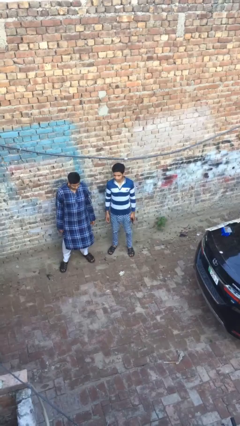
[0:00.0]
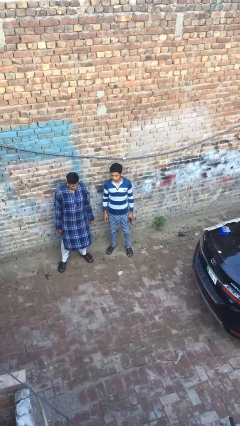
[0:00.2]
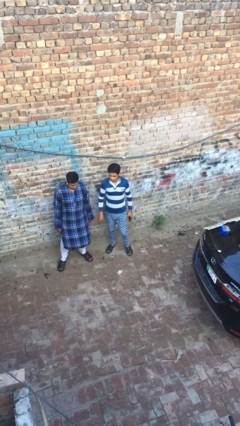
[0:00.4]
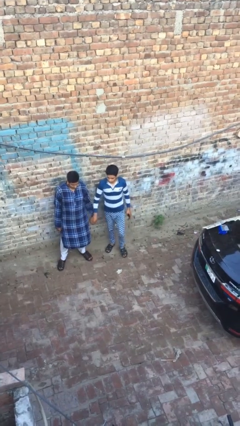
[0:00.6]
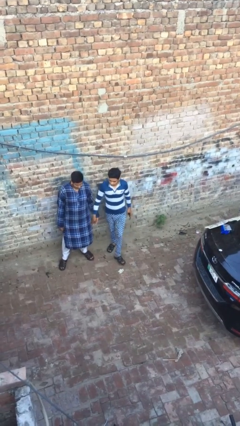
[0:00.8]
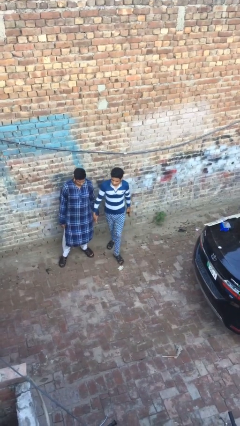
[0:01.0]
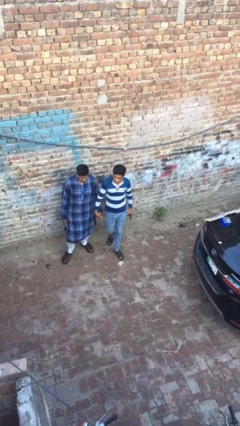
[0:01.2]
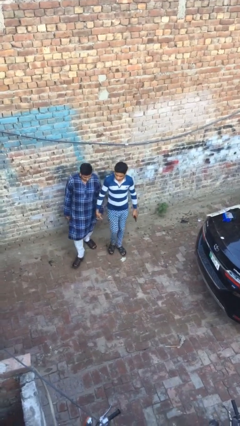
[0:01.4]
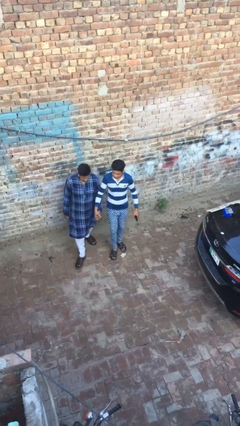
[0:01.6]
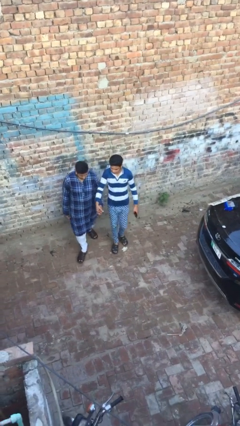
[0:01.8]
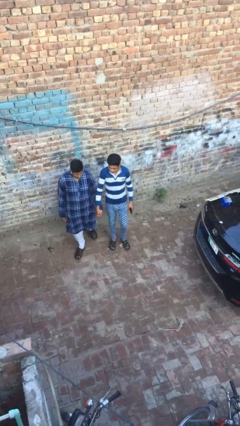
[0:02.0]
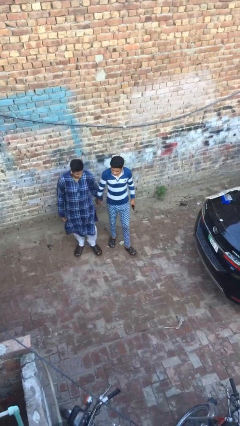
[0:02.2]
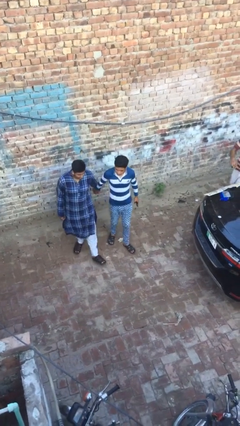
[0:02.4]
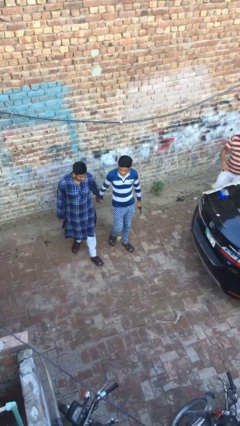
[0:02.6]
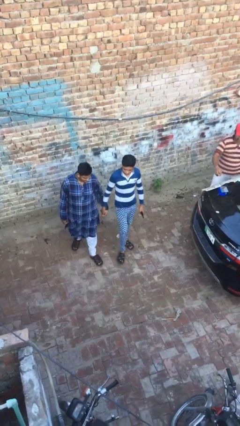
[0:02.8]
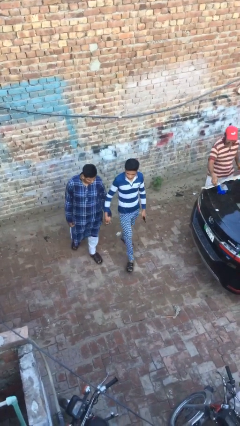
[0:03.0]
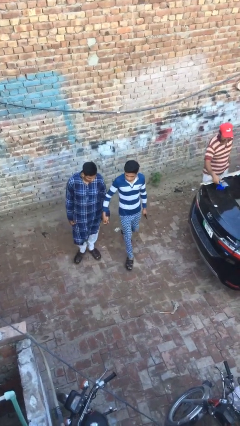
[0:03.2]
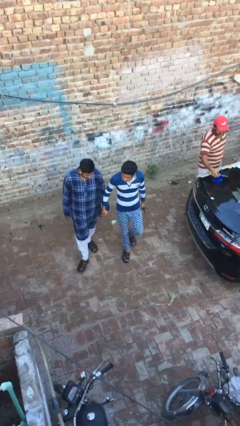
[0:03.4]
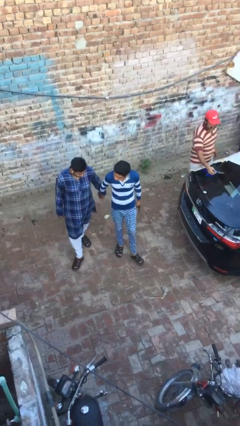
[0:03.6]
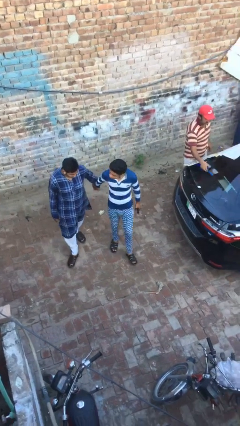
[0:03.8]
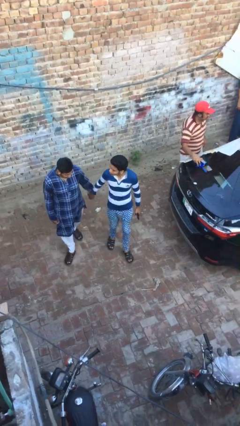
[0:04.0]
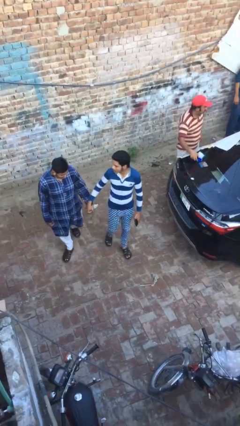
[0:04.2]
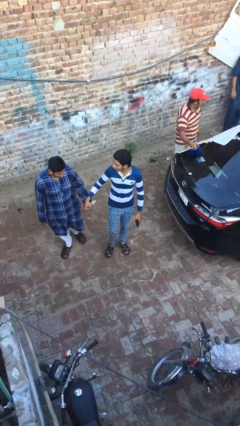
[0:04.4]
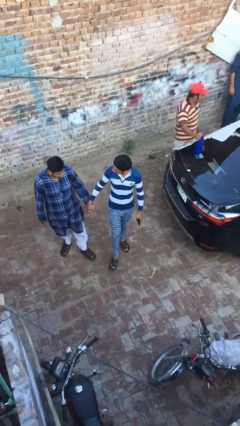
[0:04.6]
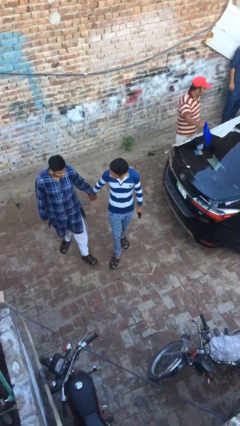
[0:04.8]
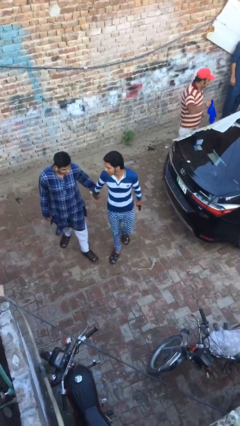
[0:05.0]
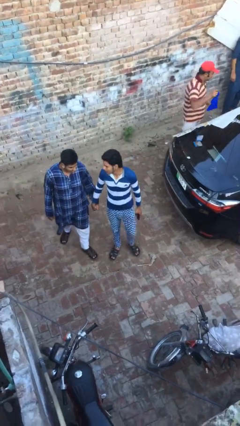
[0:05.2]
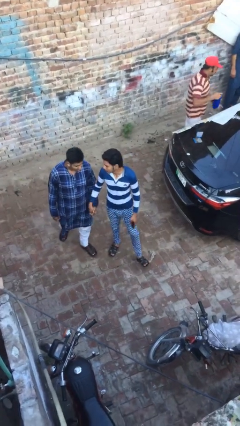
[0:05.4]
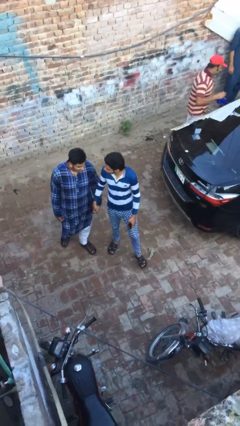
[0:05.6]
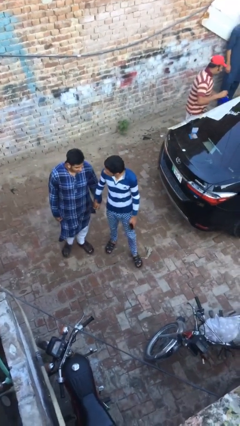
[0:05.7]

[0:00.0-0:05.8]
person holds hand

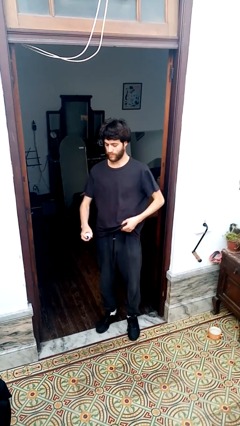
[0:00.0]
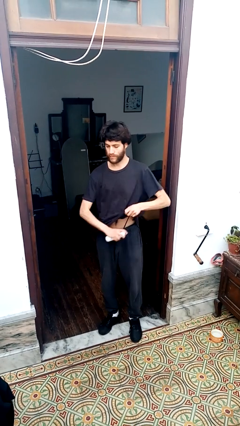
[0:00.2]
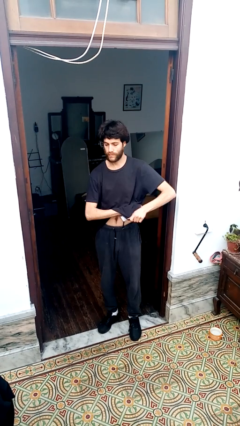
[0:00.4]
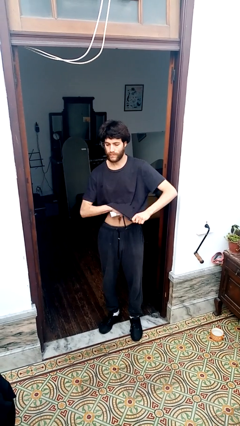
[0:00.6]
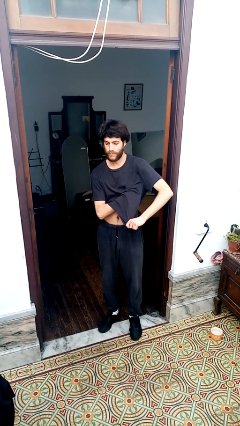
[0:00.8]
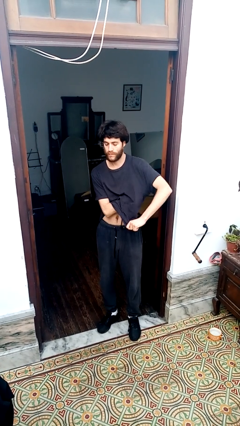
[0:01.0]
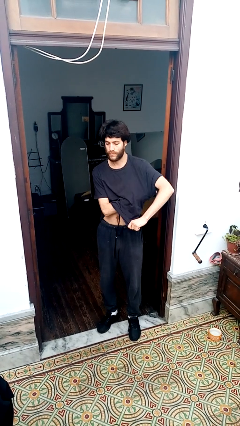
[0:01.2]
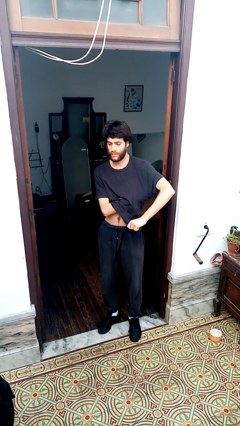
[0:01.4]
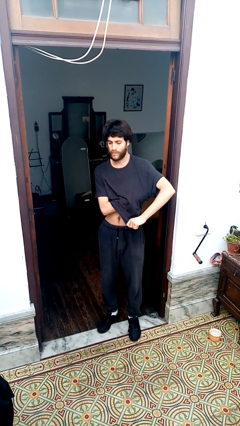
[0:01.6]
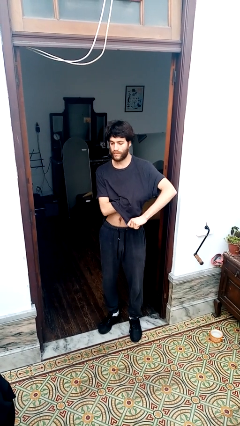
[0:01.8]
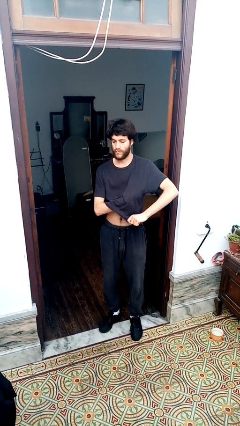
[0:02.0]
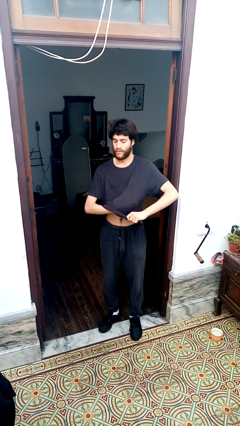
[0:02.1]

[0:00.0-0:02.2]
person applies deodorant

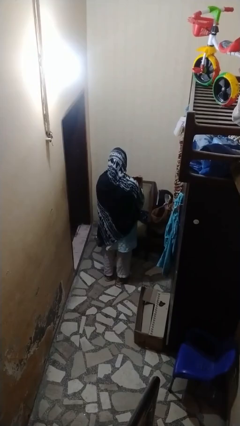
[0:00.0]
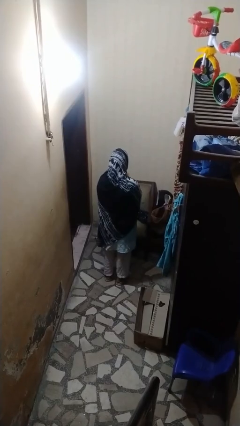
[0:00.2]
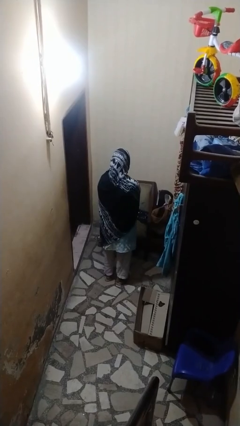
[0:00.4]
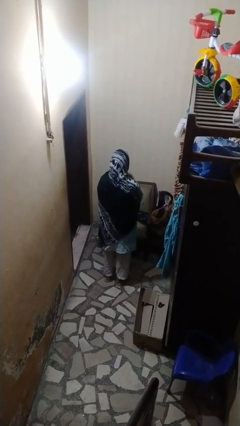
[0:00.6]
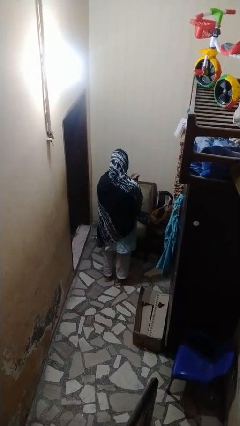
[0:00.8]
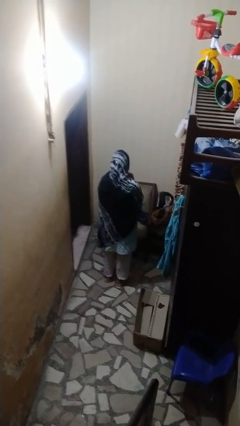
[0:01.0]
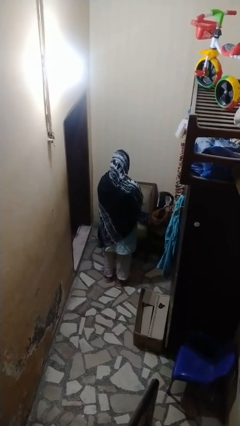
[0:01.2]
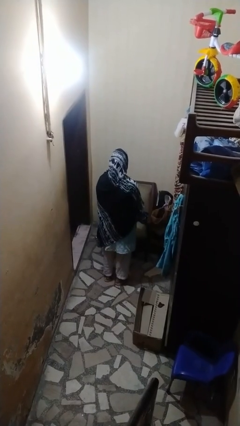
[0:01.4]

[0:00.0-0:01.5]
person gestures cut

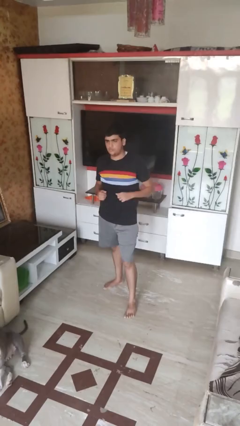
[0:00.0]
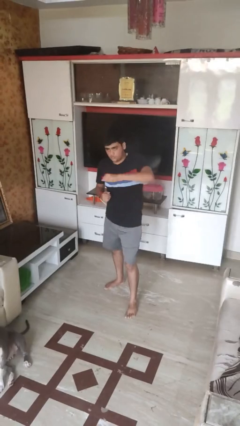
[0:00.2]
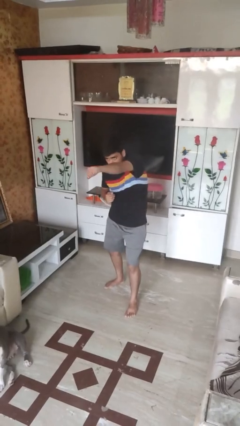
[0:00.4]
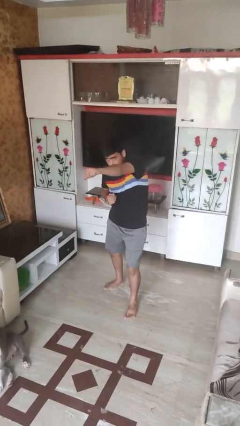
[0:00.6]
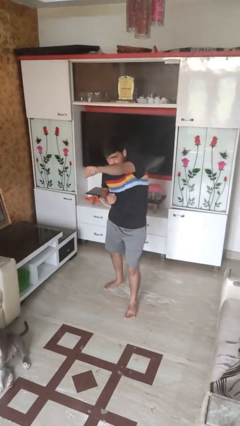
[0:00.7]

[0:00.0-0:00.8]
person punches

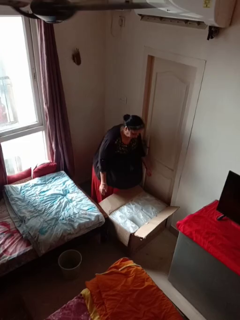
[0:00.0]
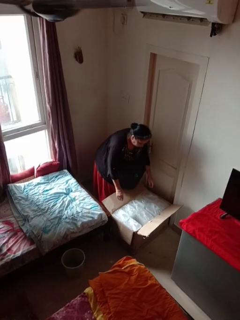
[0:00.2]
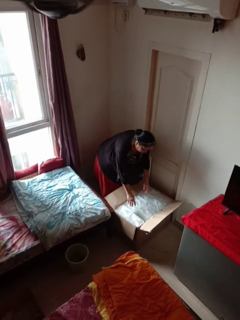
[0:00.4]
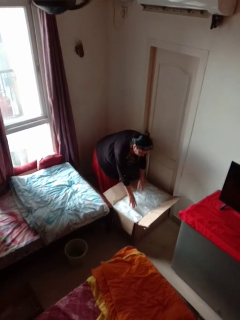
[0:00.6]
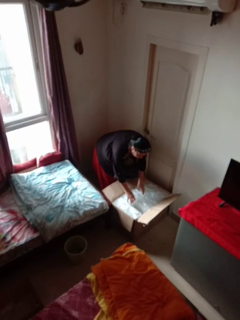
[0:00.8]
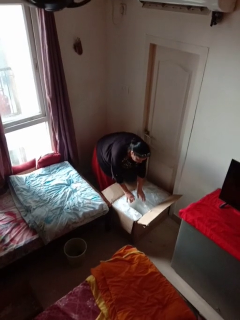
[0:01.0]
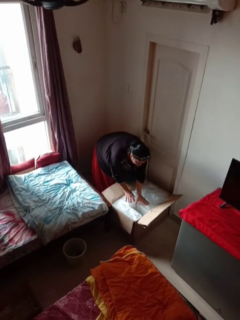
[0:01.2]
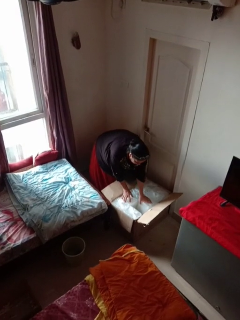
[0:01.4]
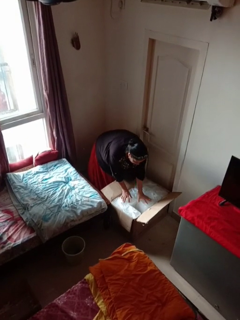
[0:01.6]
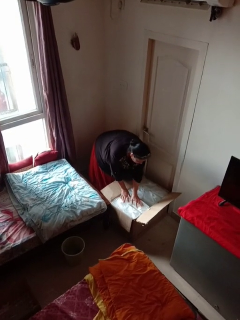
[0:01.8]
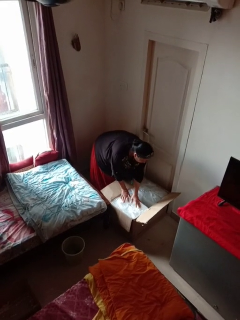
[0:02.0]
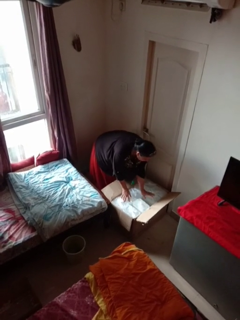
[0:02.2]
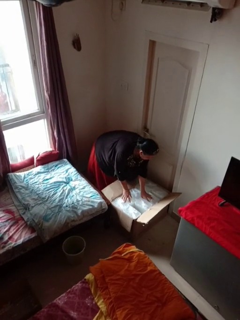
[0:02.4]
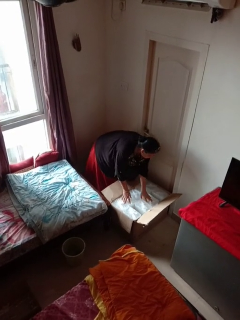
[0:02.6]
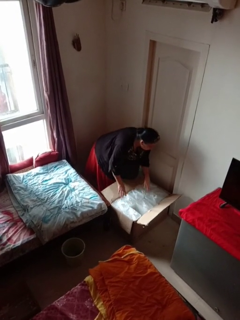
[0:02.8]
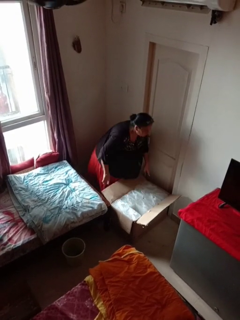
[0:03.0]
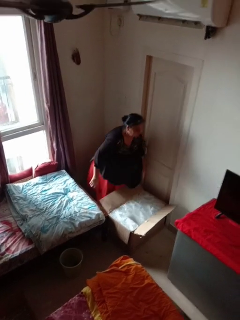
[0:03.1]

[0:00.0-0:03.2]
person searches in box

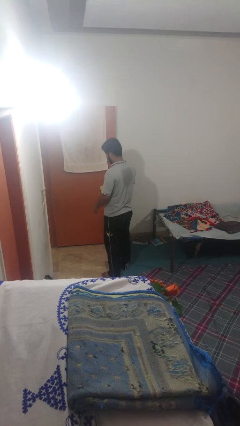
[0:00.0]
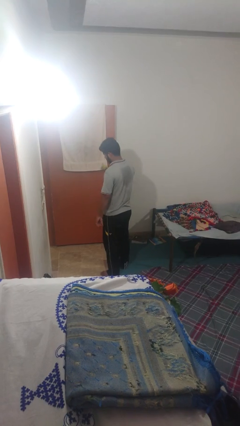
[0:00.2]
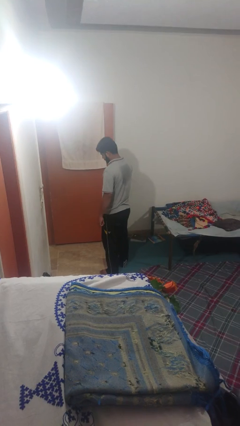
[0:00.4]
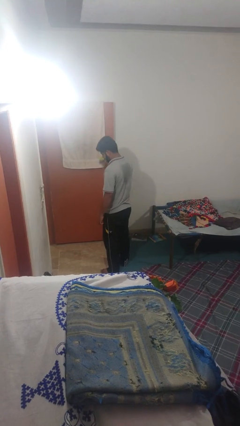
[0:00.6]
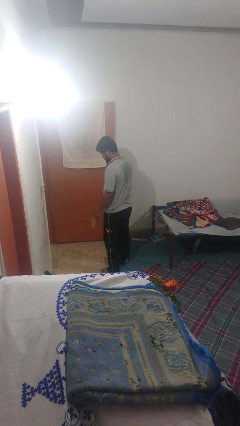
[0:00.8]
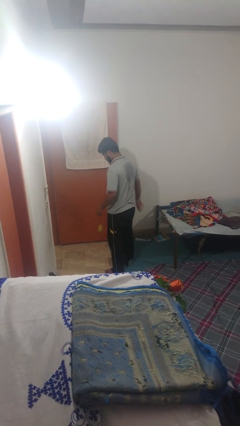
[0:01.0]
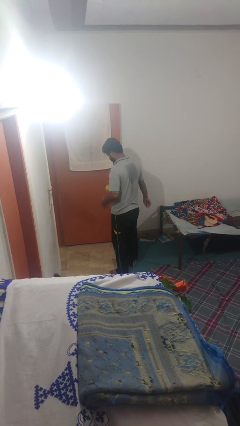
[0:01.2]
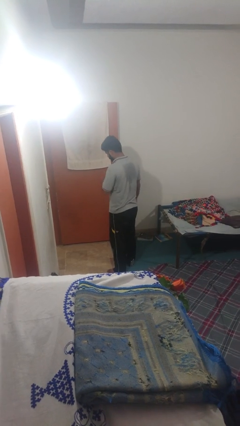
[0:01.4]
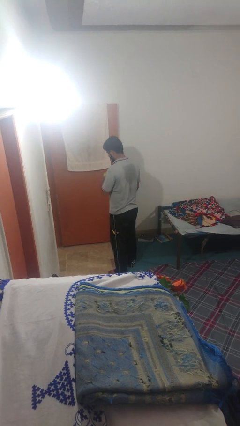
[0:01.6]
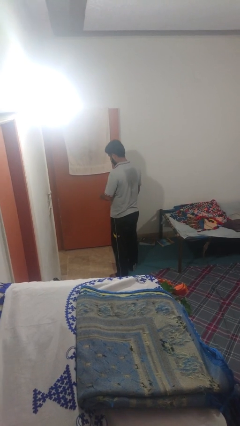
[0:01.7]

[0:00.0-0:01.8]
person bounces ball on floor

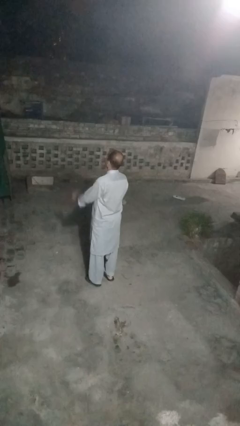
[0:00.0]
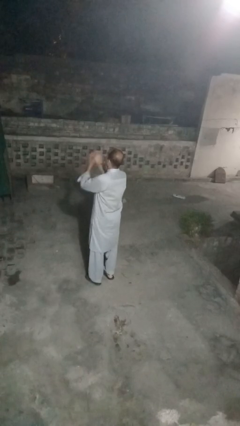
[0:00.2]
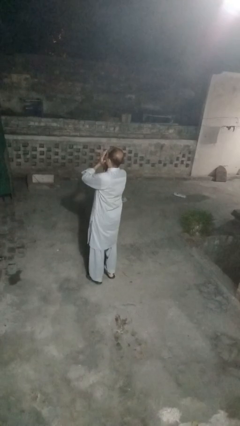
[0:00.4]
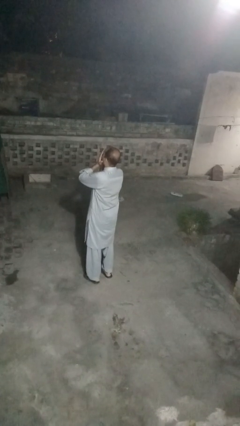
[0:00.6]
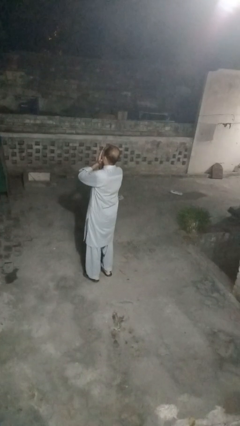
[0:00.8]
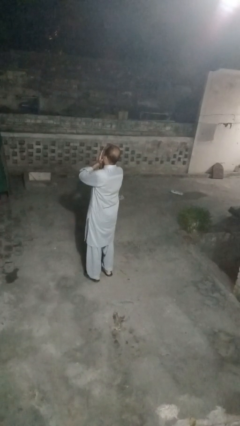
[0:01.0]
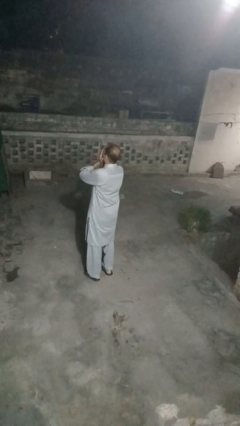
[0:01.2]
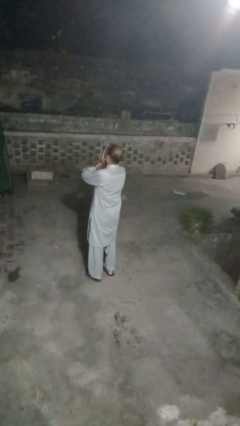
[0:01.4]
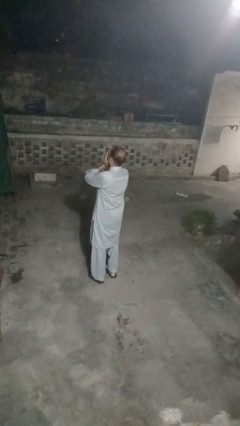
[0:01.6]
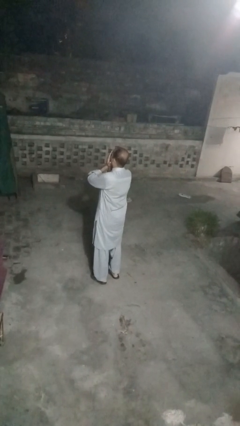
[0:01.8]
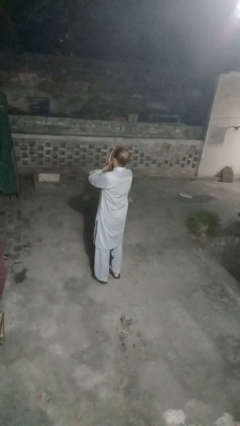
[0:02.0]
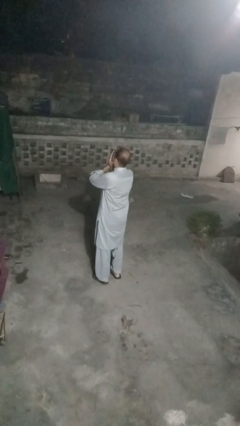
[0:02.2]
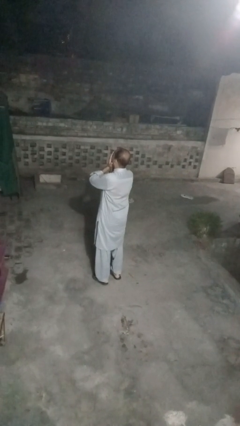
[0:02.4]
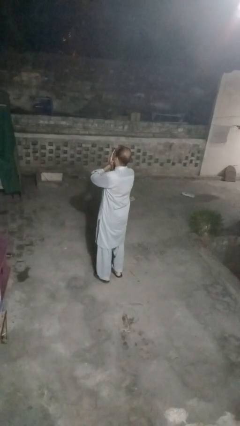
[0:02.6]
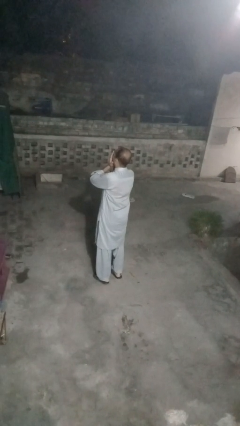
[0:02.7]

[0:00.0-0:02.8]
person covers face with hands
